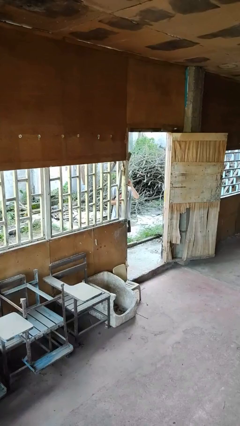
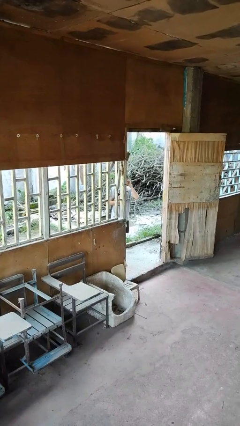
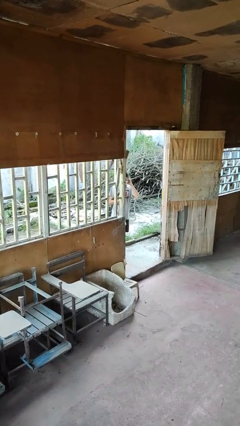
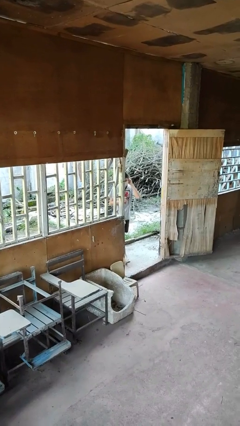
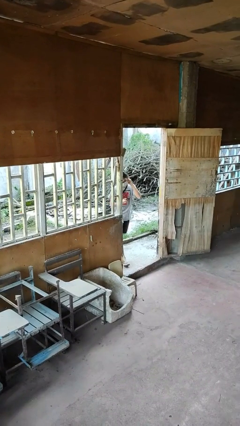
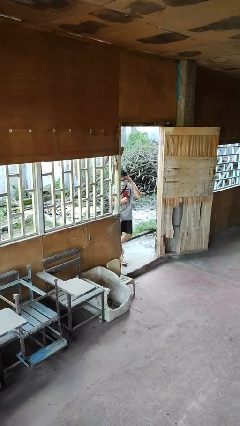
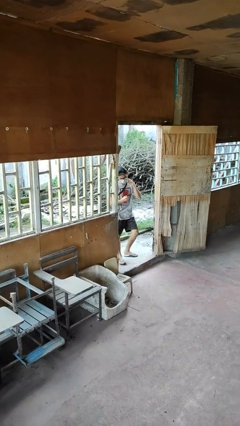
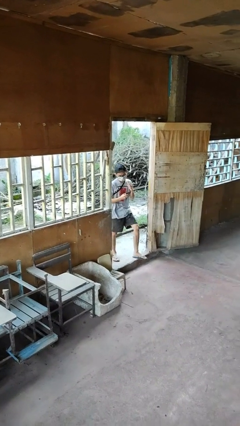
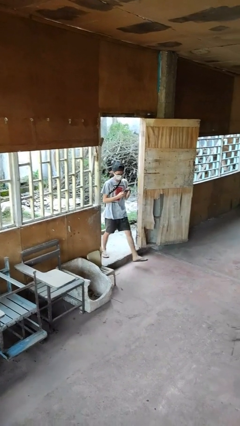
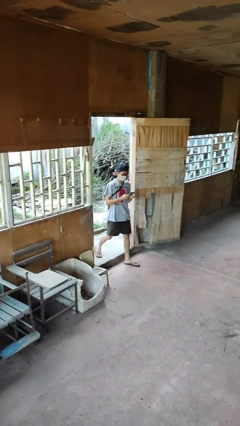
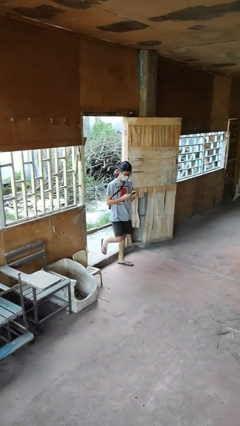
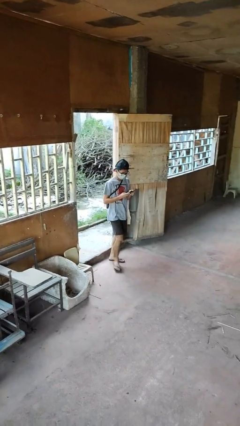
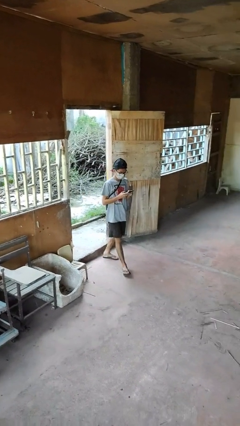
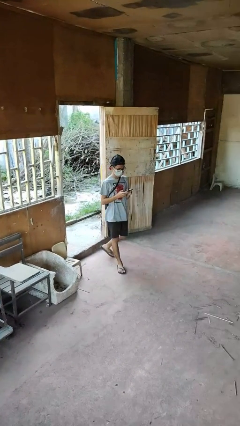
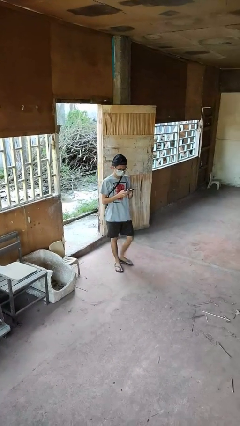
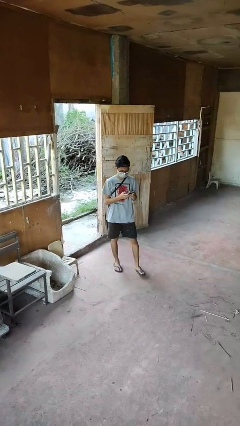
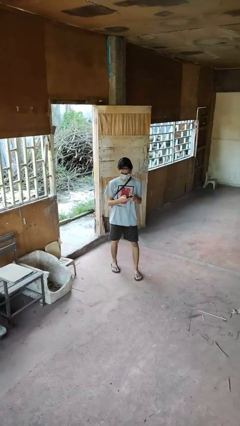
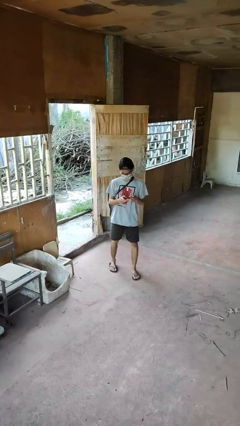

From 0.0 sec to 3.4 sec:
person enters scene through structure

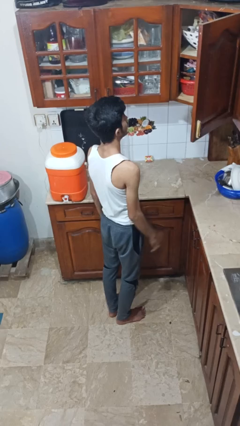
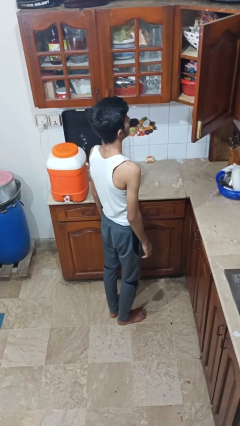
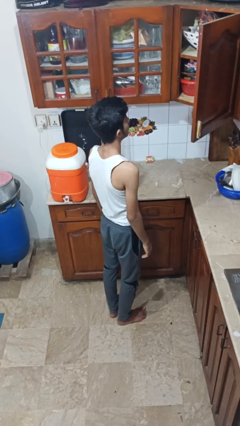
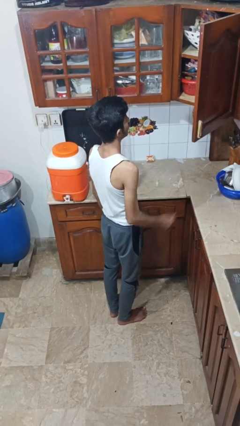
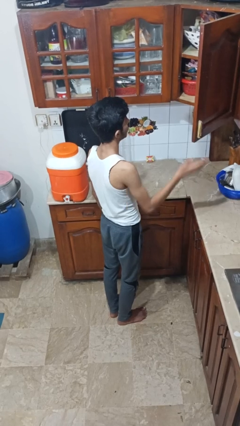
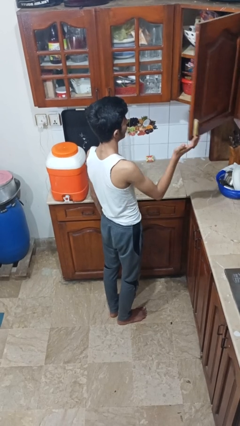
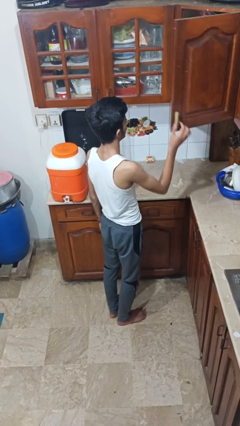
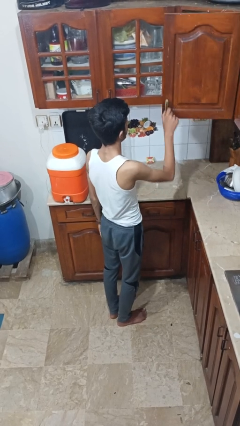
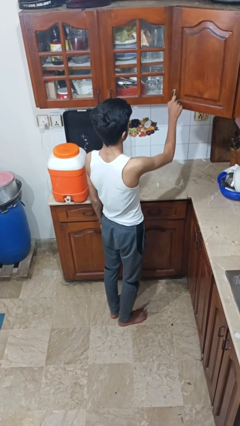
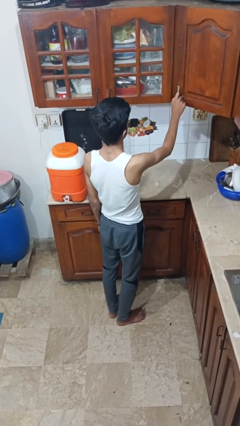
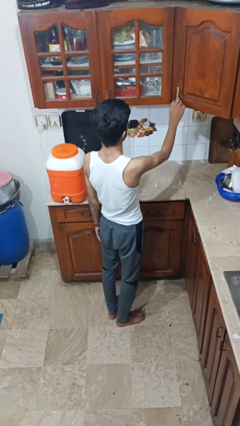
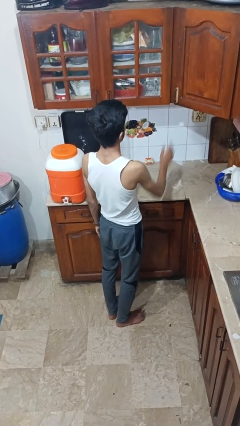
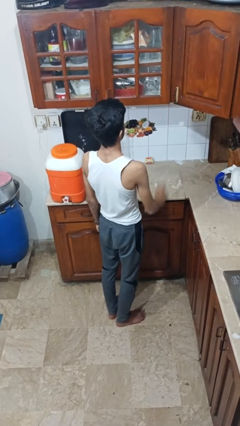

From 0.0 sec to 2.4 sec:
person closes cabinet

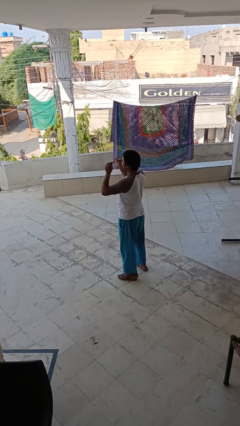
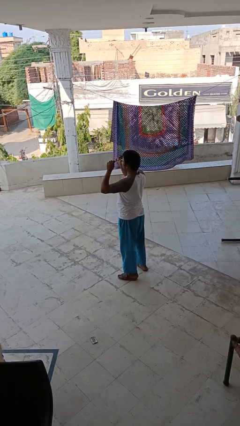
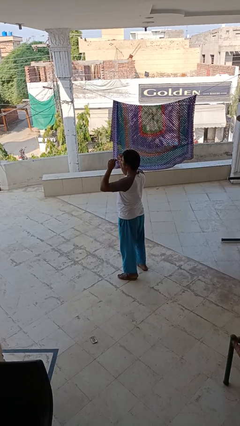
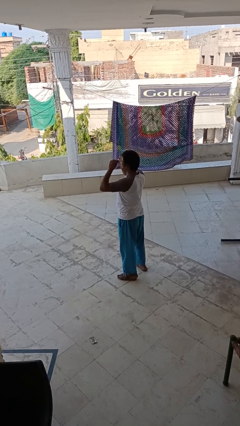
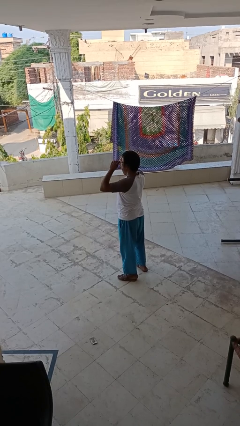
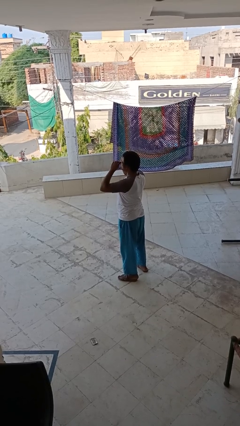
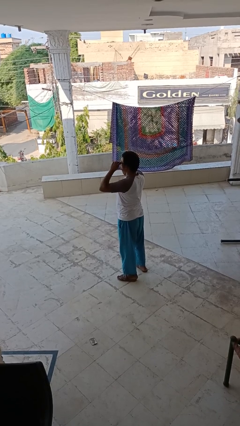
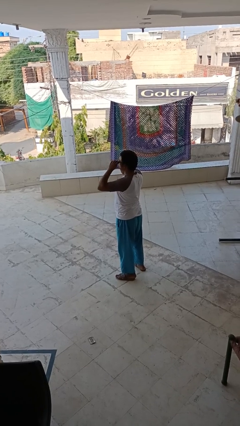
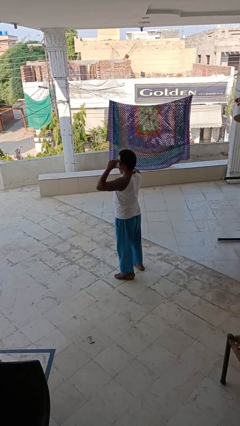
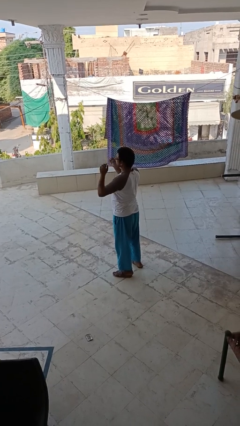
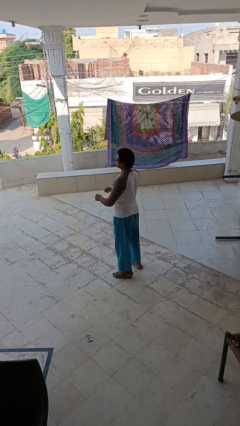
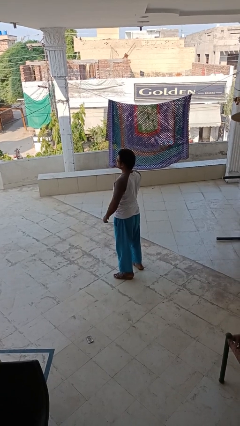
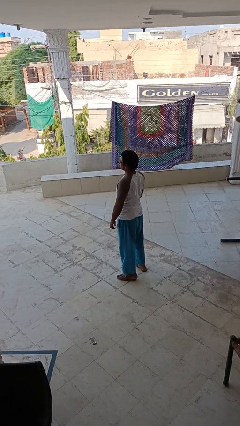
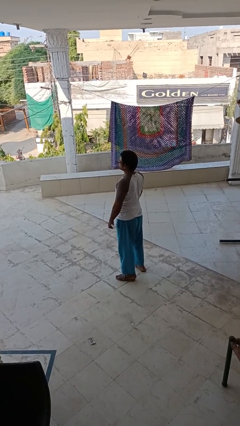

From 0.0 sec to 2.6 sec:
person puts on glasses

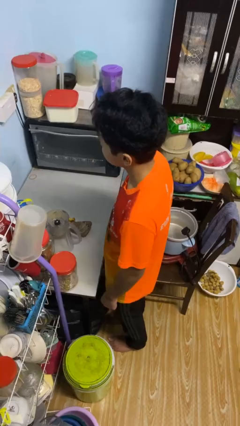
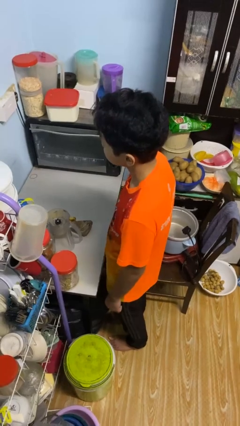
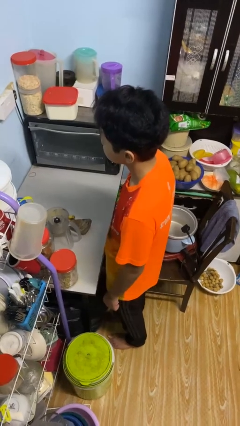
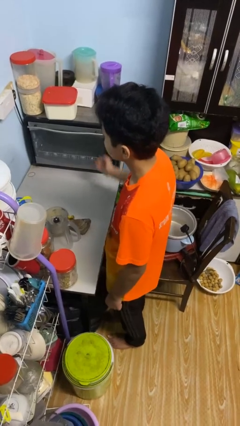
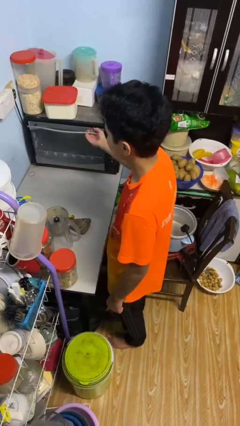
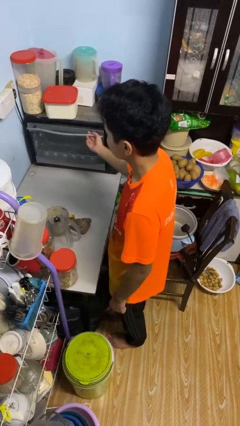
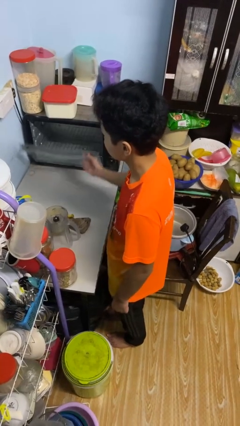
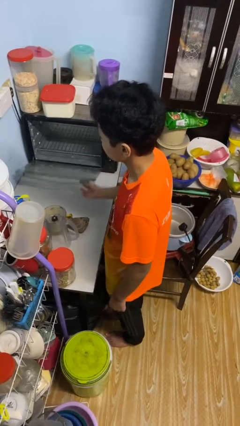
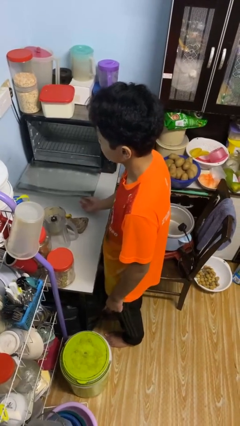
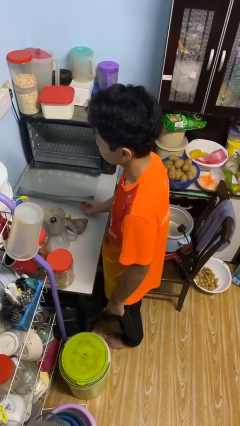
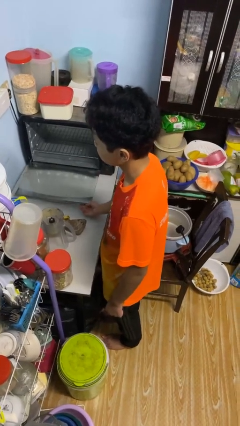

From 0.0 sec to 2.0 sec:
person opens oven door

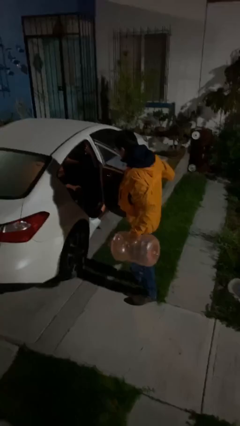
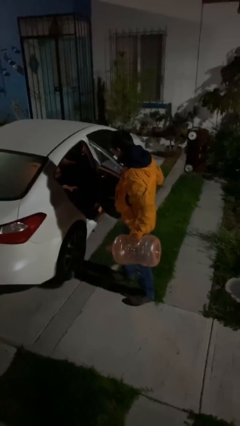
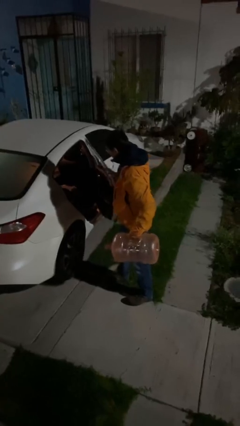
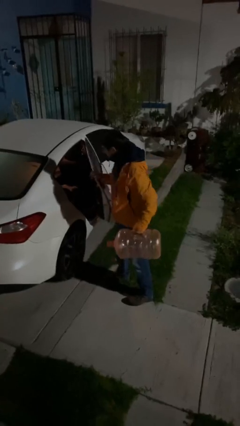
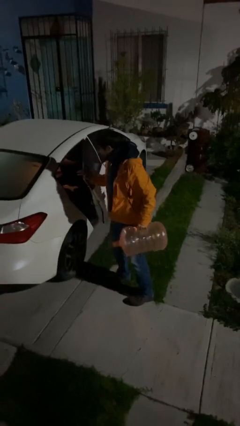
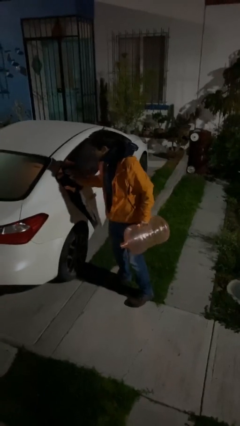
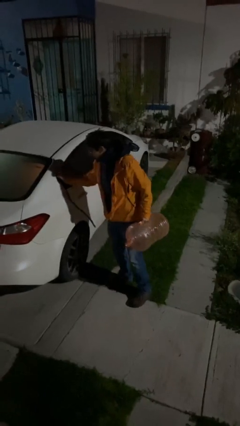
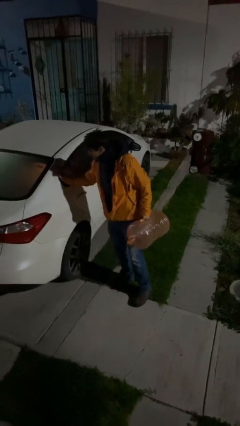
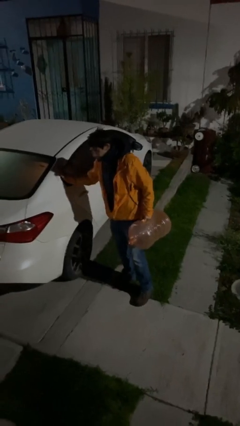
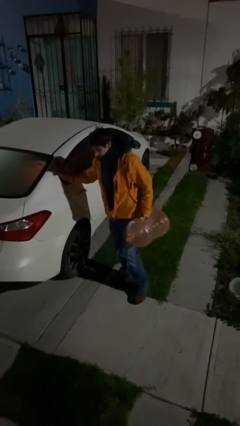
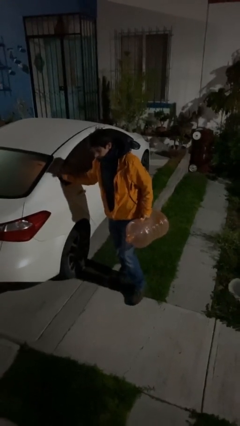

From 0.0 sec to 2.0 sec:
person closes car door

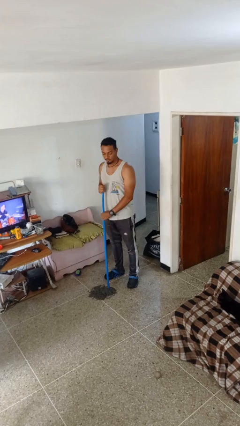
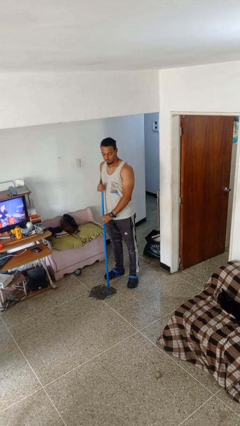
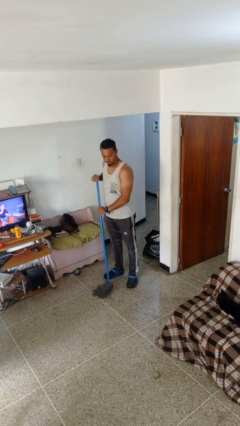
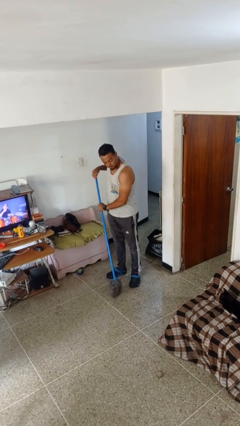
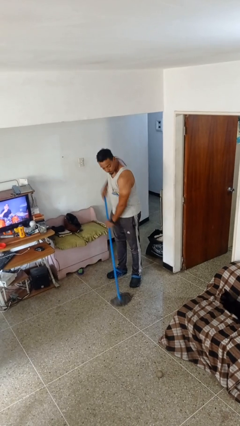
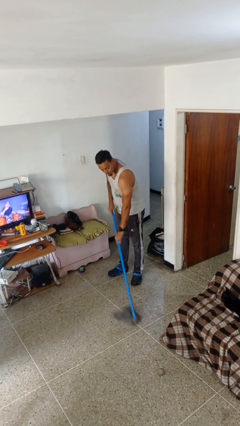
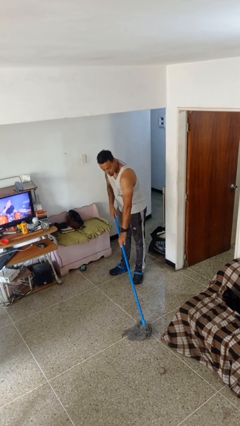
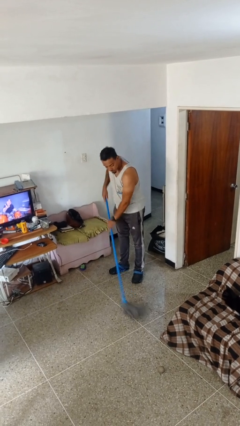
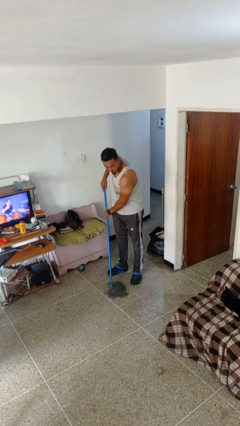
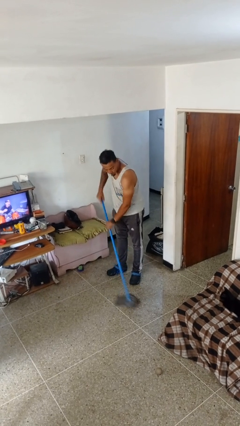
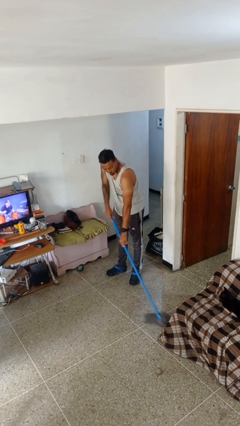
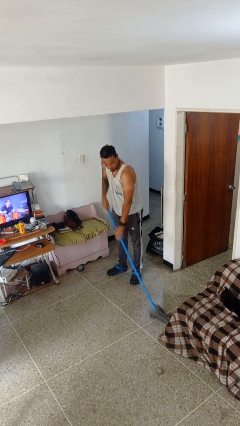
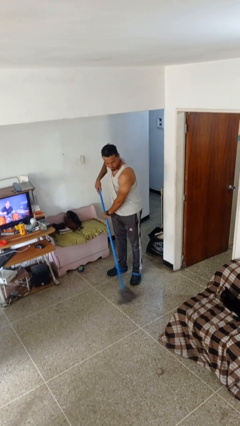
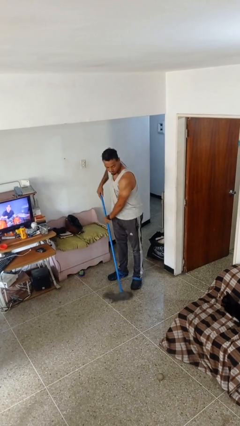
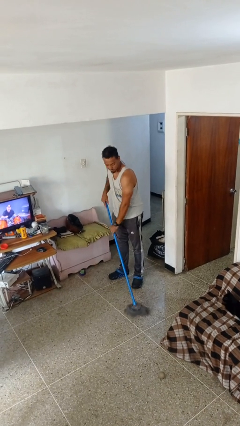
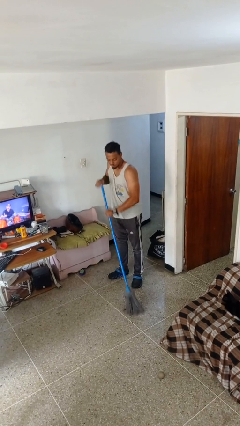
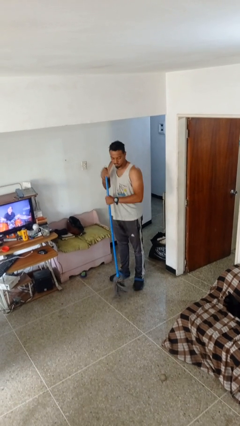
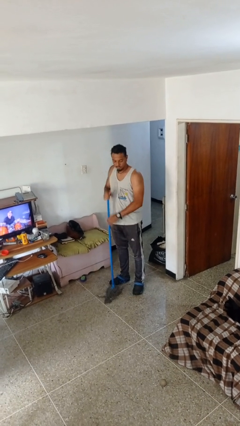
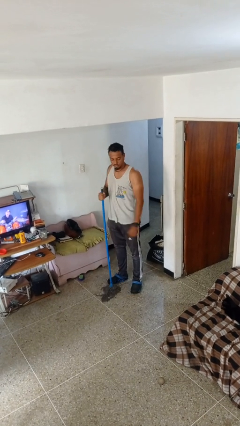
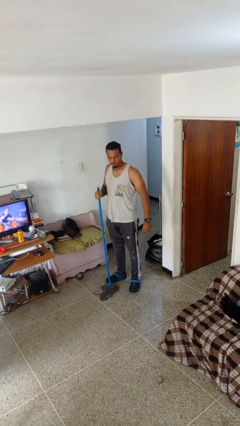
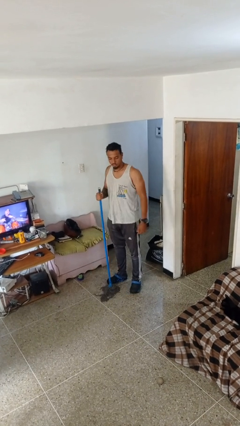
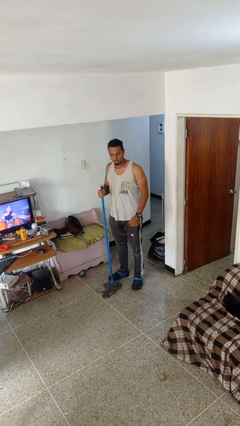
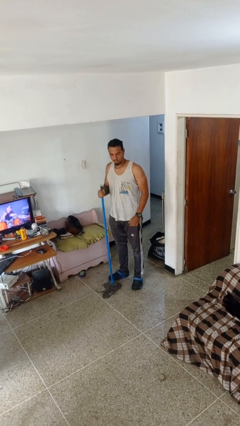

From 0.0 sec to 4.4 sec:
person mops

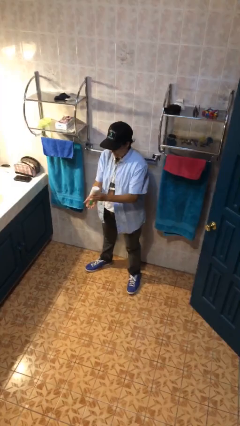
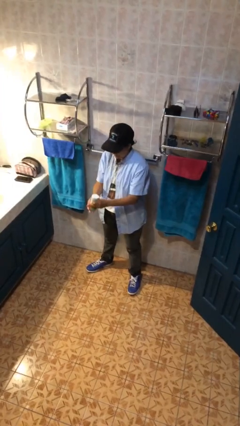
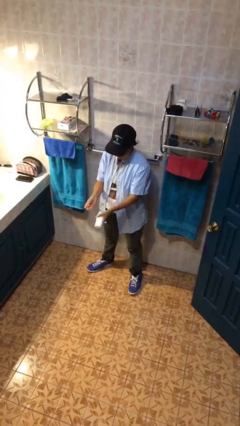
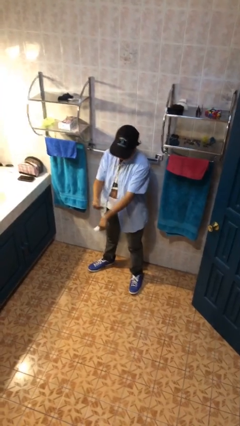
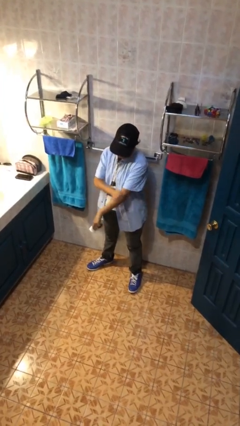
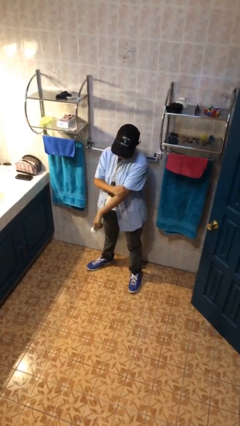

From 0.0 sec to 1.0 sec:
person applies sunscreen
